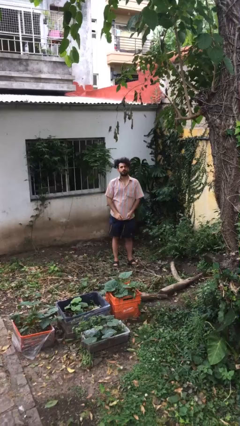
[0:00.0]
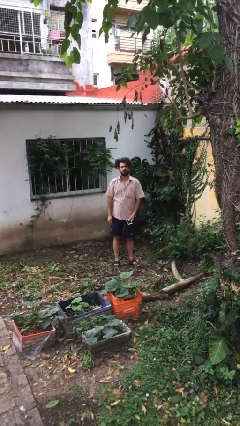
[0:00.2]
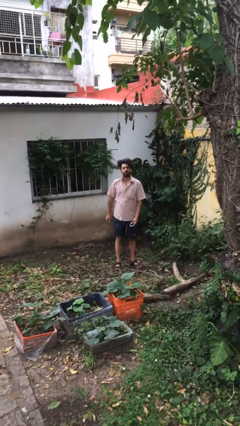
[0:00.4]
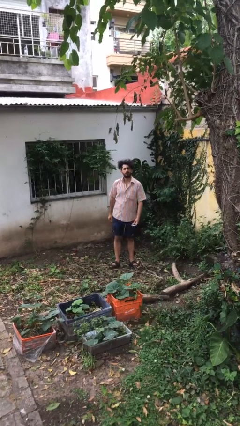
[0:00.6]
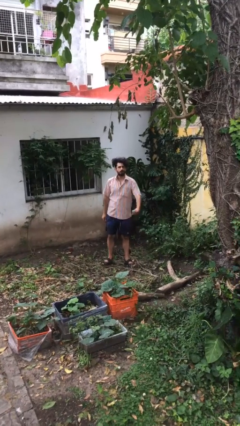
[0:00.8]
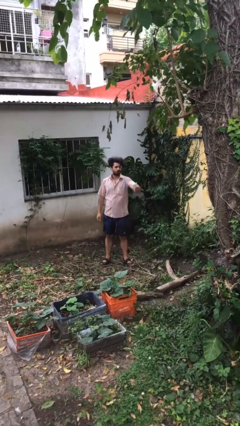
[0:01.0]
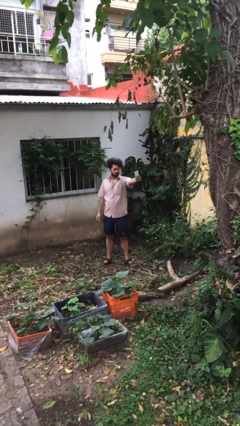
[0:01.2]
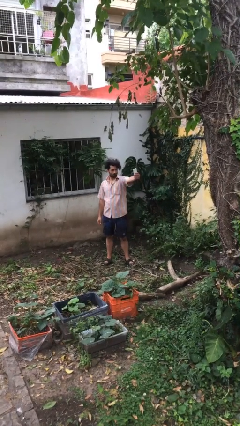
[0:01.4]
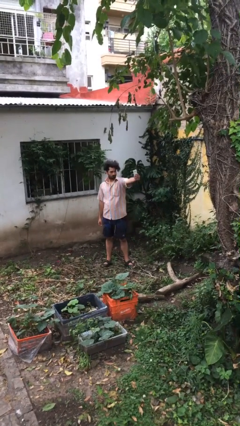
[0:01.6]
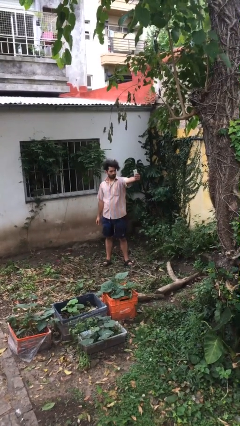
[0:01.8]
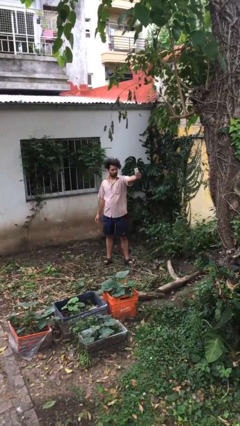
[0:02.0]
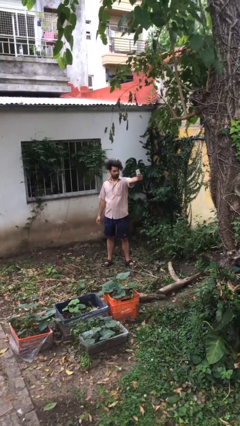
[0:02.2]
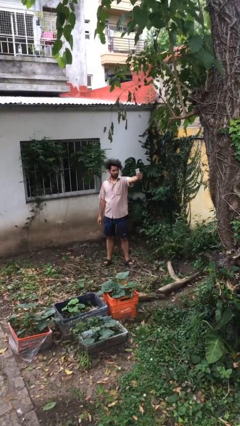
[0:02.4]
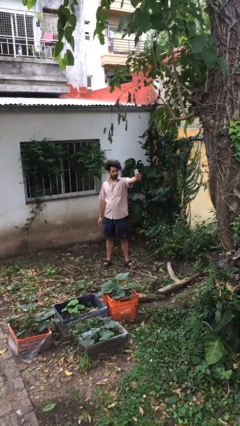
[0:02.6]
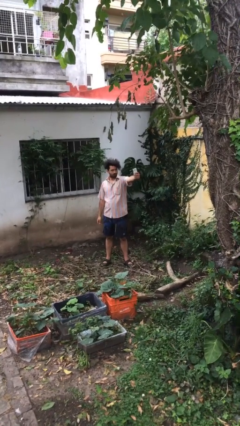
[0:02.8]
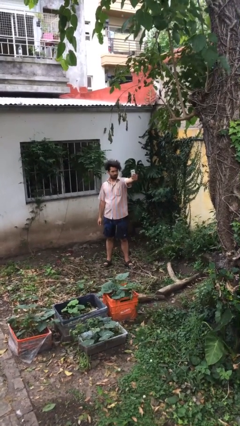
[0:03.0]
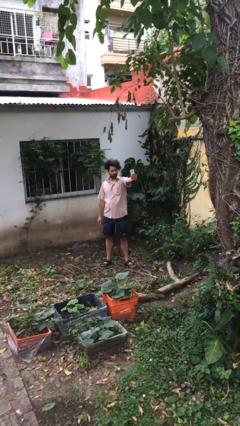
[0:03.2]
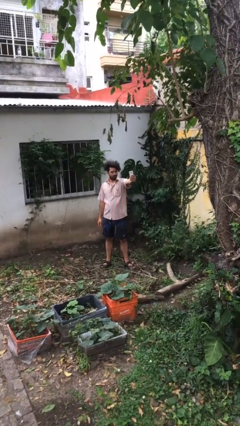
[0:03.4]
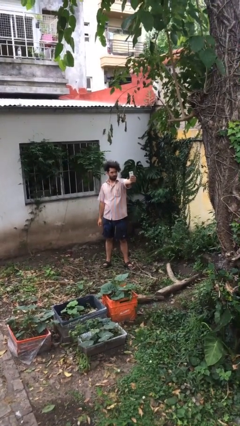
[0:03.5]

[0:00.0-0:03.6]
person takes selfie

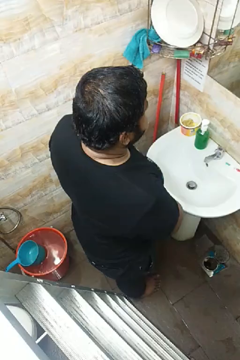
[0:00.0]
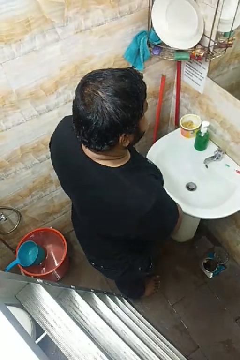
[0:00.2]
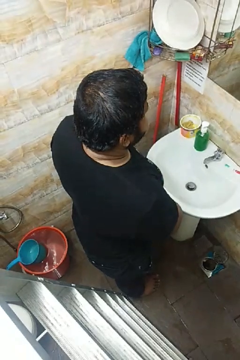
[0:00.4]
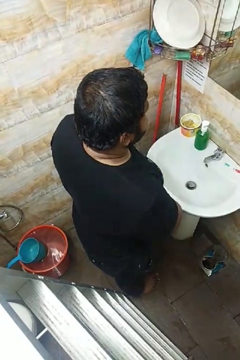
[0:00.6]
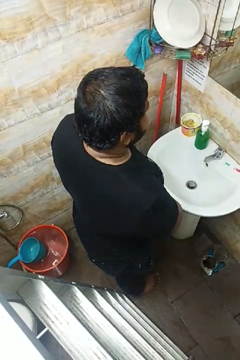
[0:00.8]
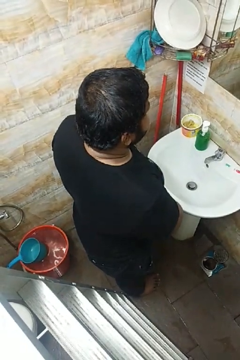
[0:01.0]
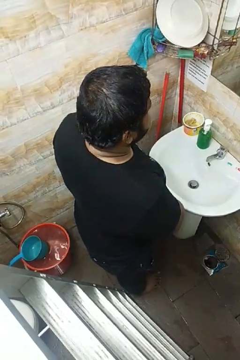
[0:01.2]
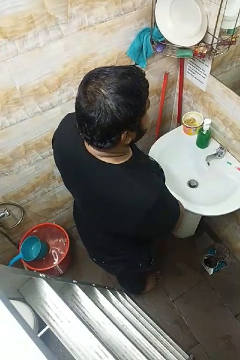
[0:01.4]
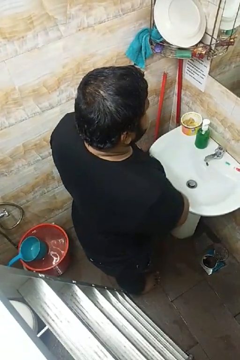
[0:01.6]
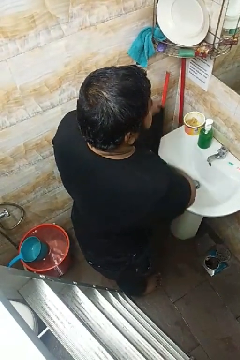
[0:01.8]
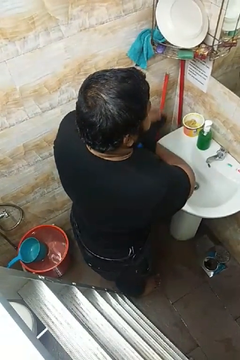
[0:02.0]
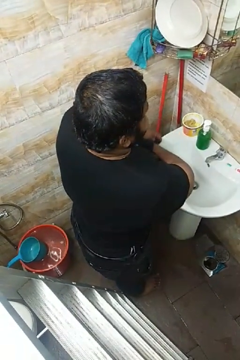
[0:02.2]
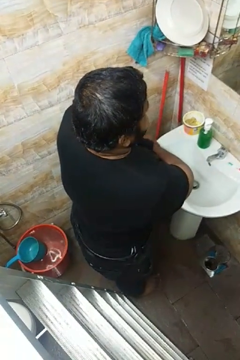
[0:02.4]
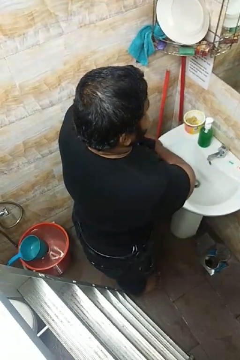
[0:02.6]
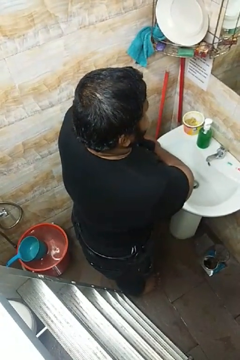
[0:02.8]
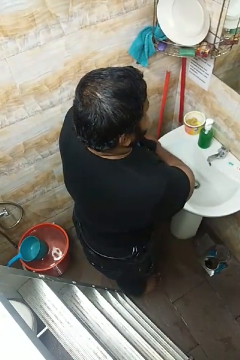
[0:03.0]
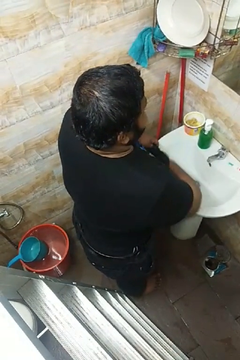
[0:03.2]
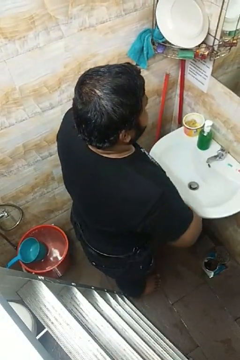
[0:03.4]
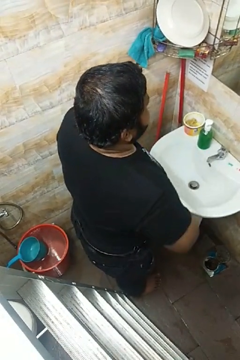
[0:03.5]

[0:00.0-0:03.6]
person applies deodorant

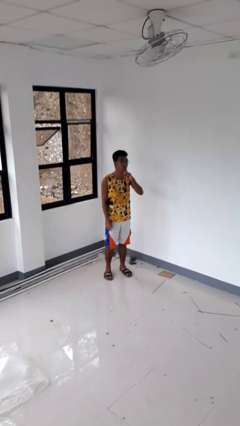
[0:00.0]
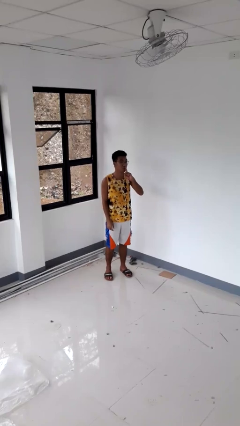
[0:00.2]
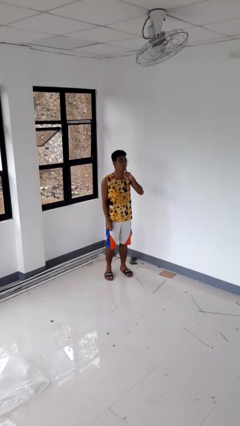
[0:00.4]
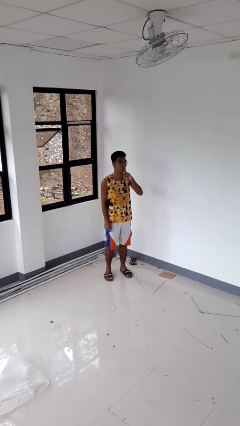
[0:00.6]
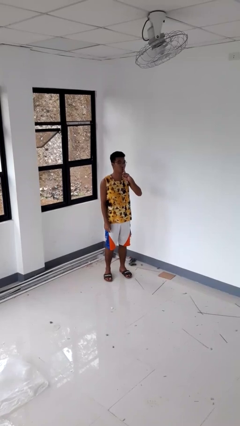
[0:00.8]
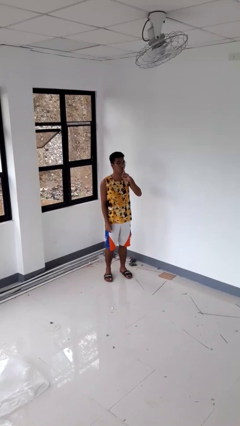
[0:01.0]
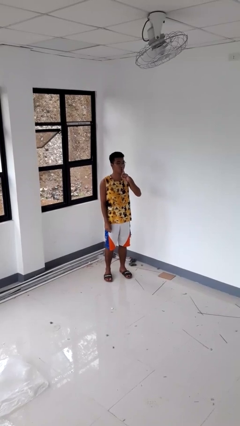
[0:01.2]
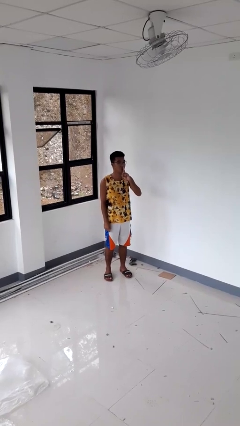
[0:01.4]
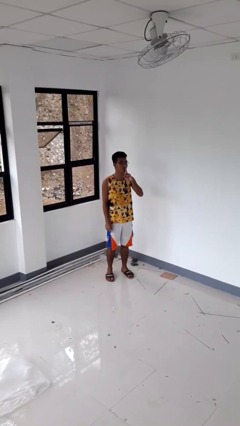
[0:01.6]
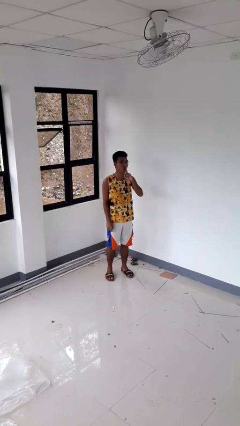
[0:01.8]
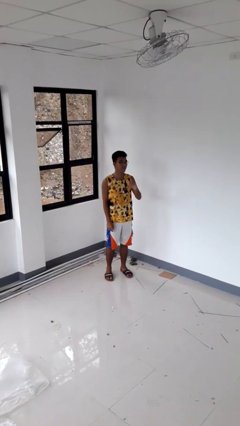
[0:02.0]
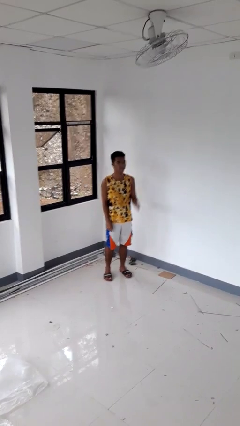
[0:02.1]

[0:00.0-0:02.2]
person gestures be quiet

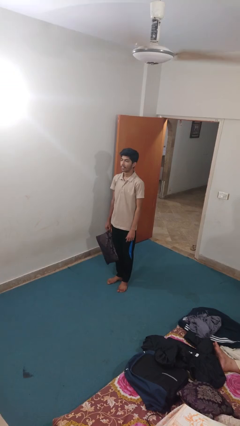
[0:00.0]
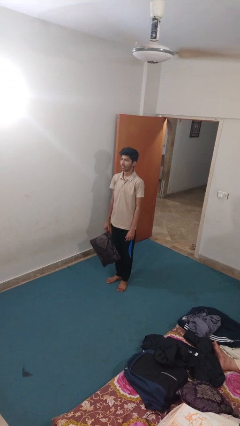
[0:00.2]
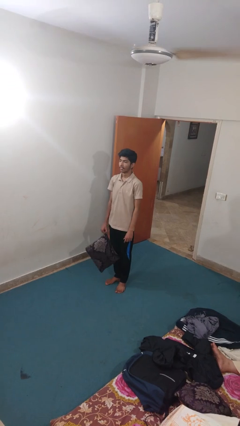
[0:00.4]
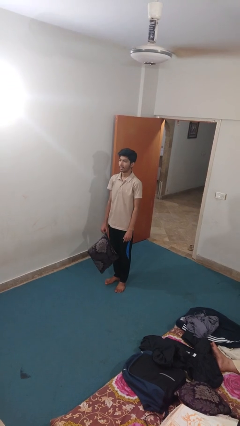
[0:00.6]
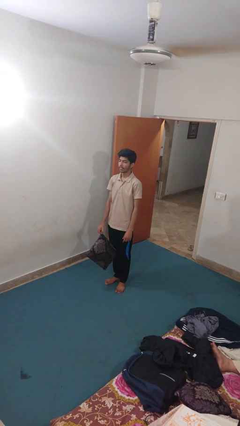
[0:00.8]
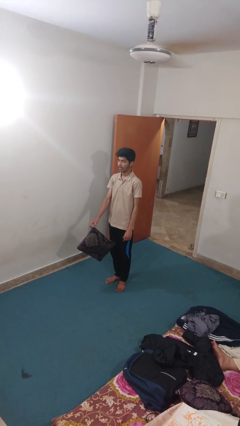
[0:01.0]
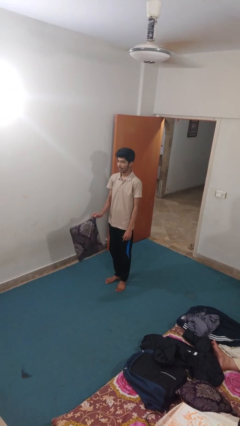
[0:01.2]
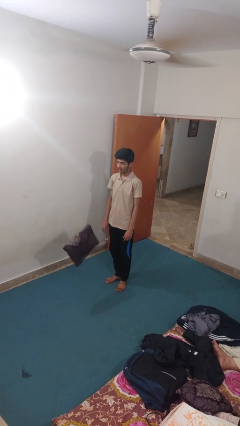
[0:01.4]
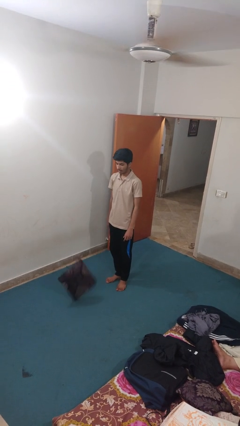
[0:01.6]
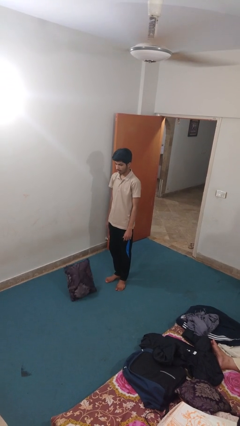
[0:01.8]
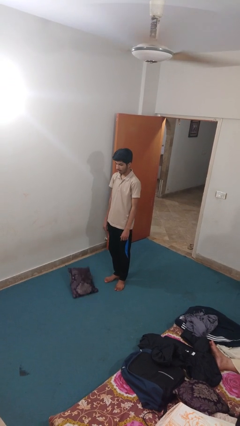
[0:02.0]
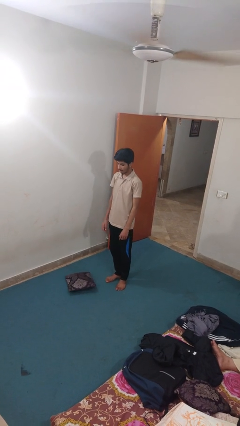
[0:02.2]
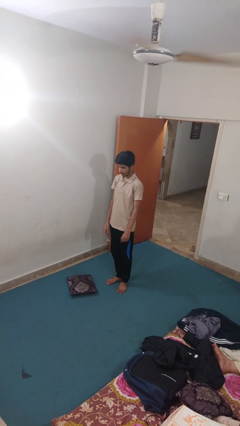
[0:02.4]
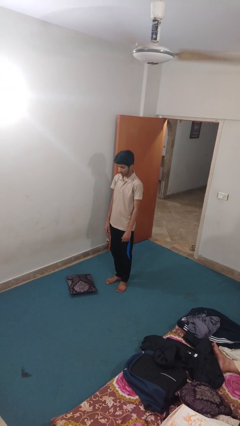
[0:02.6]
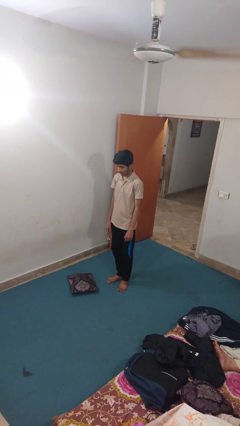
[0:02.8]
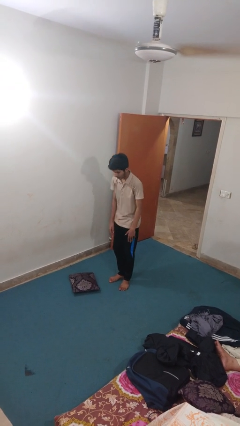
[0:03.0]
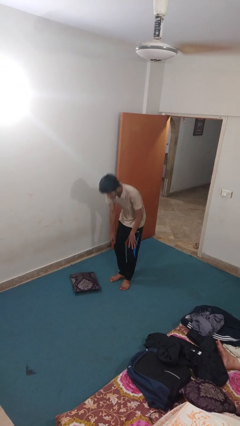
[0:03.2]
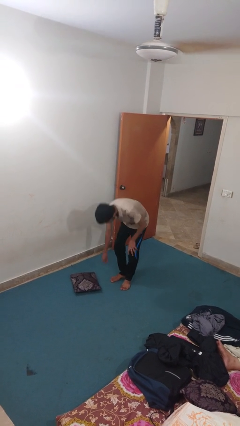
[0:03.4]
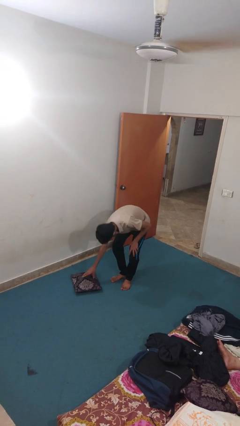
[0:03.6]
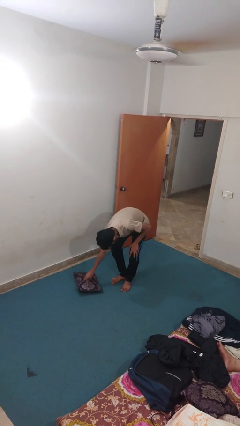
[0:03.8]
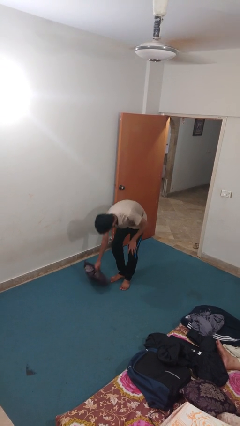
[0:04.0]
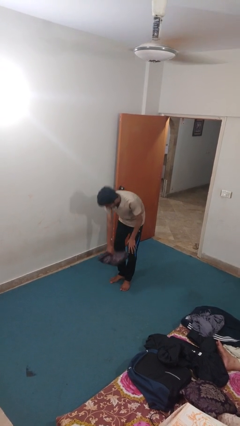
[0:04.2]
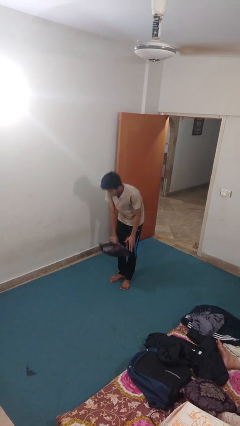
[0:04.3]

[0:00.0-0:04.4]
person drops object

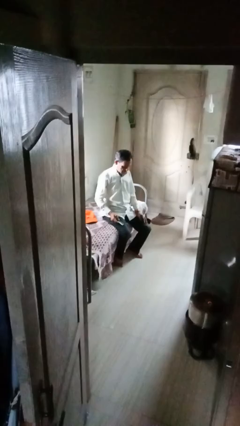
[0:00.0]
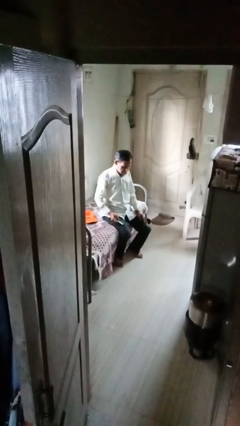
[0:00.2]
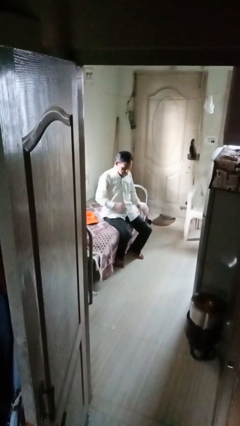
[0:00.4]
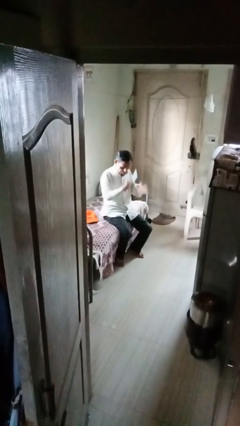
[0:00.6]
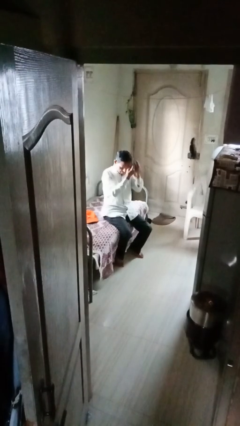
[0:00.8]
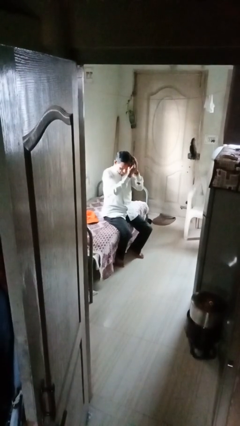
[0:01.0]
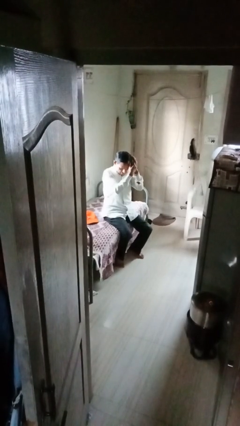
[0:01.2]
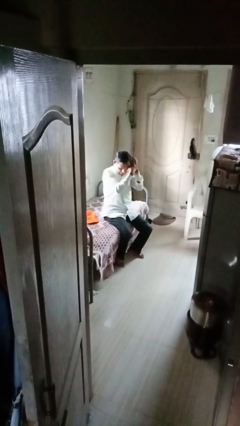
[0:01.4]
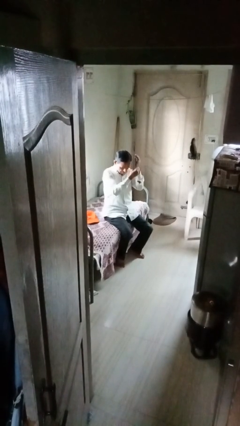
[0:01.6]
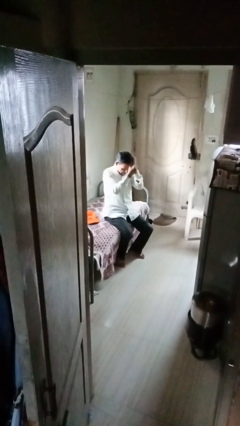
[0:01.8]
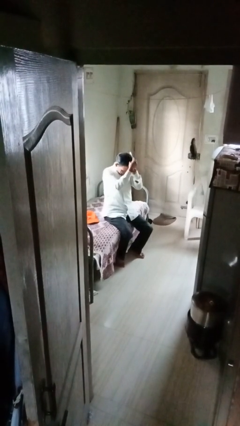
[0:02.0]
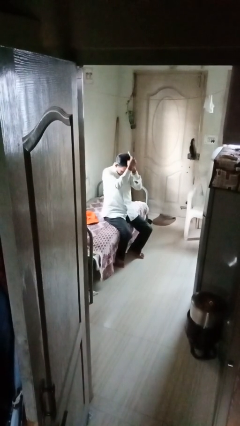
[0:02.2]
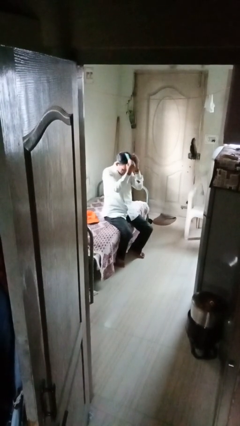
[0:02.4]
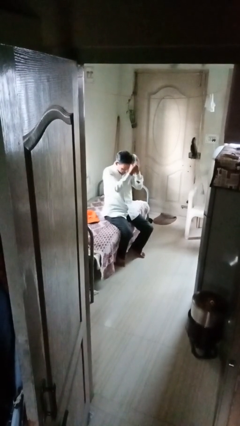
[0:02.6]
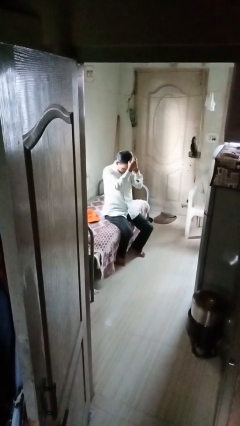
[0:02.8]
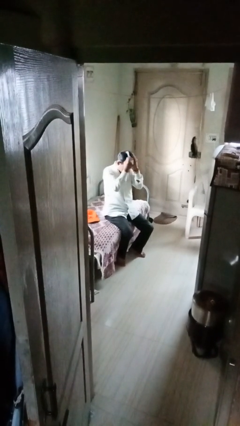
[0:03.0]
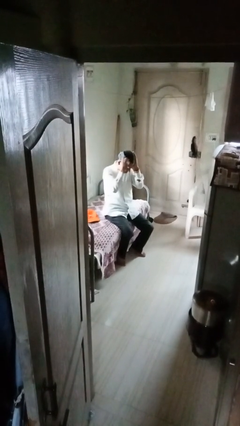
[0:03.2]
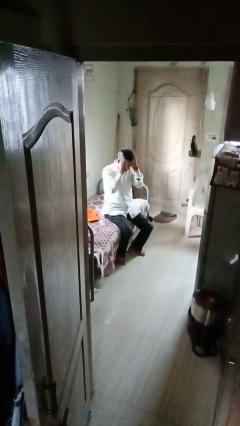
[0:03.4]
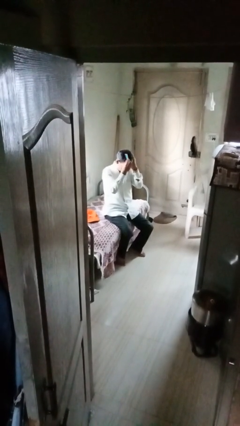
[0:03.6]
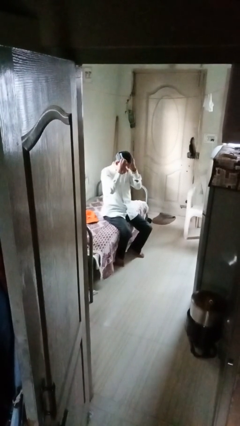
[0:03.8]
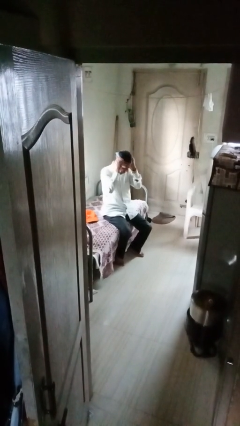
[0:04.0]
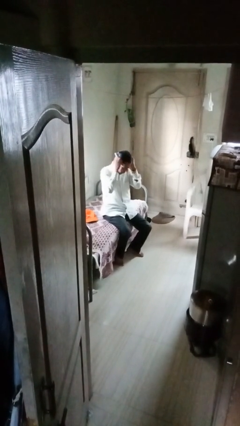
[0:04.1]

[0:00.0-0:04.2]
person brushes hair
